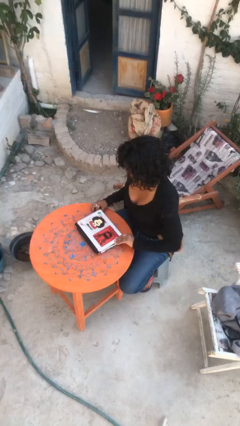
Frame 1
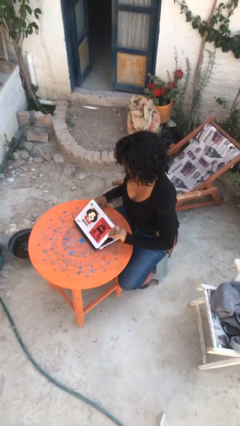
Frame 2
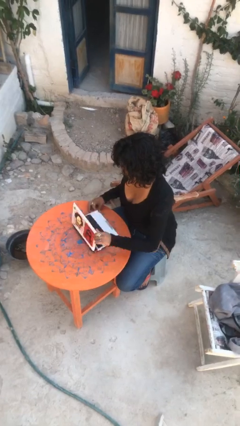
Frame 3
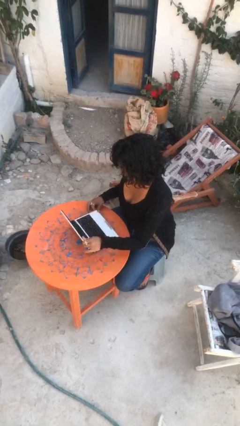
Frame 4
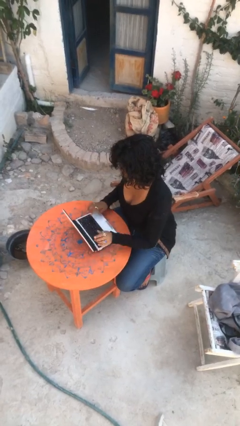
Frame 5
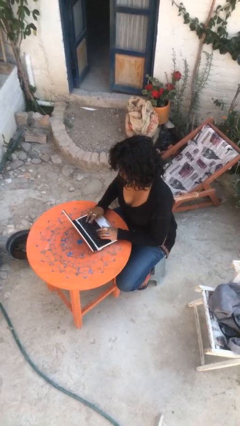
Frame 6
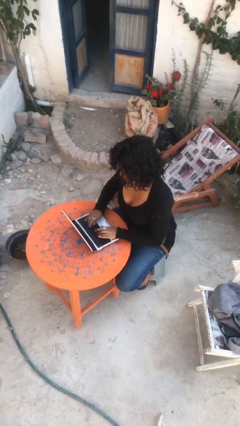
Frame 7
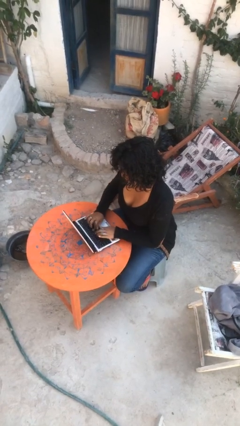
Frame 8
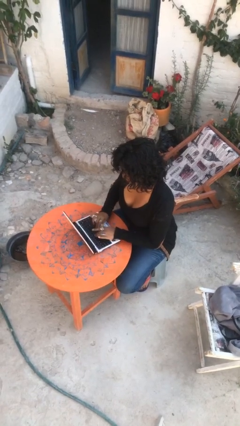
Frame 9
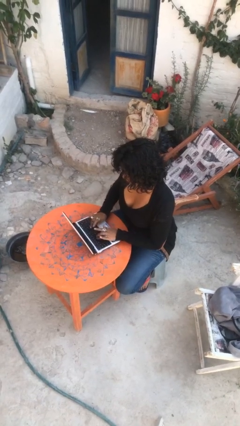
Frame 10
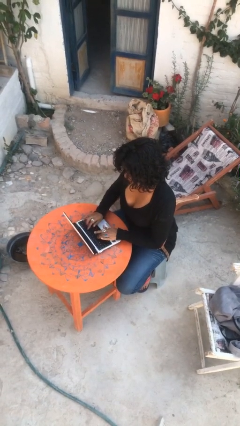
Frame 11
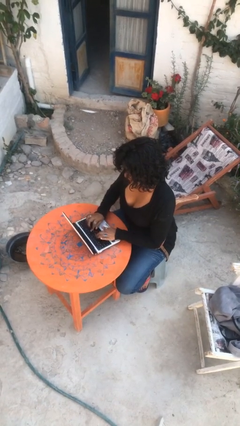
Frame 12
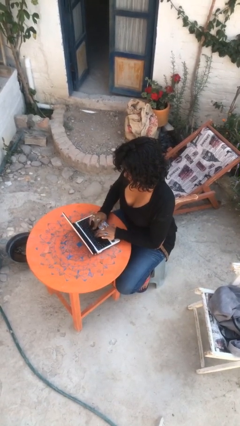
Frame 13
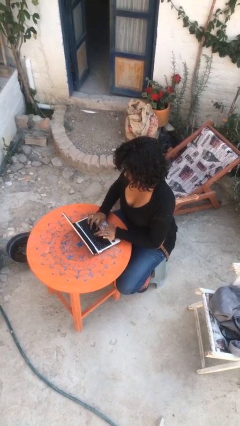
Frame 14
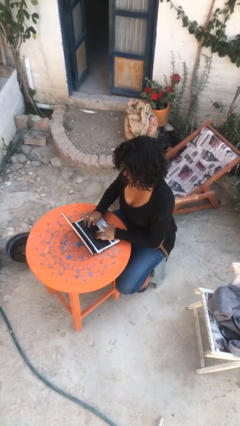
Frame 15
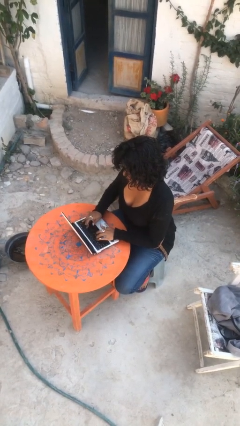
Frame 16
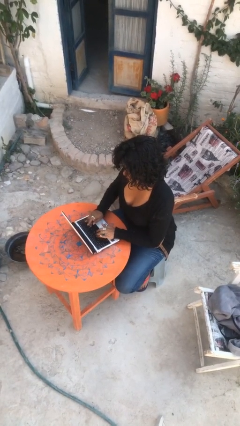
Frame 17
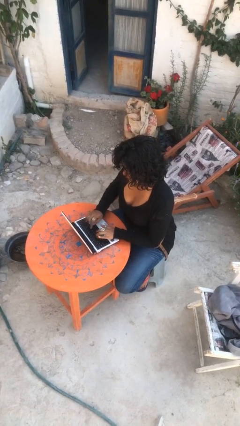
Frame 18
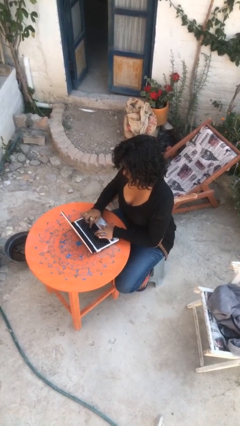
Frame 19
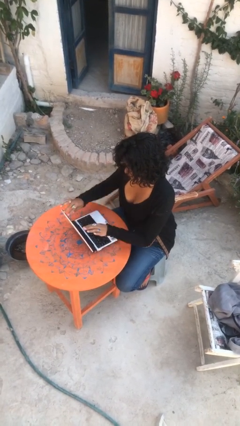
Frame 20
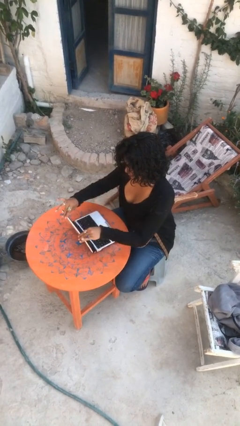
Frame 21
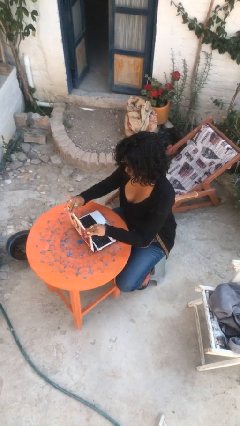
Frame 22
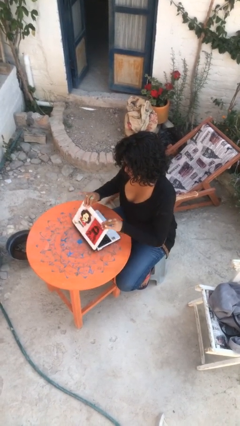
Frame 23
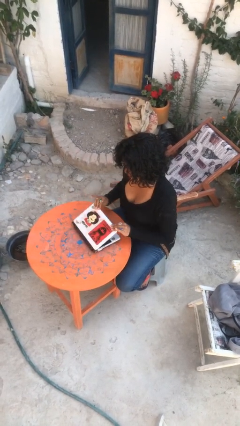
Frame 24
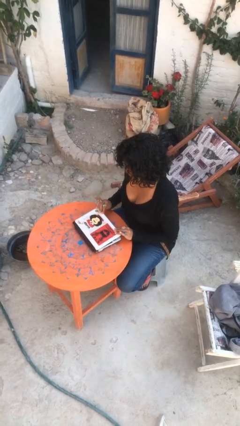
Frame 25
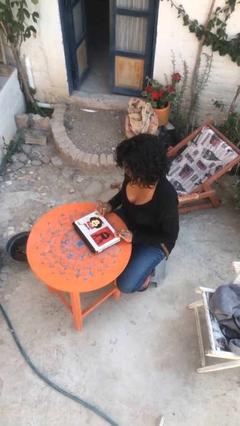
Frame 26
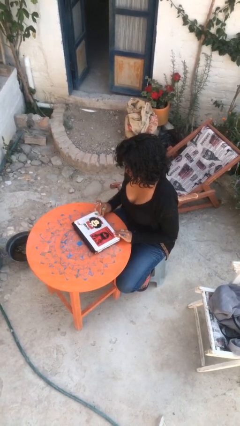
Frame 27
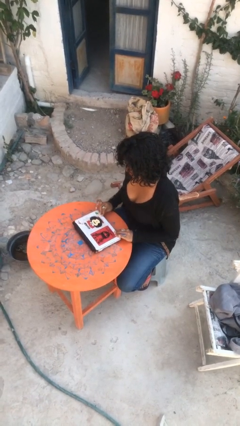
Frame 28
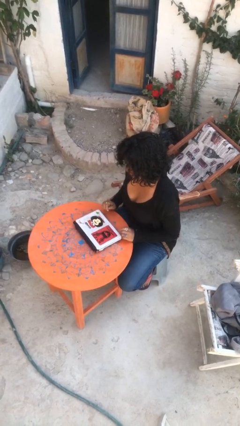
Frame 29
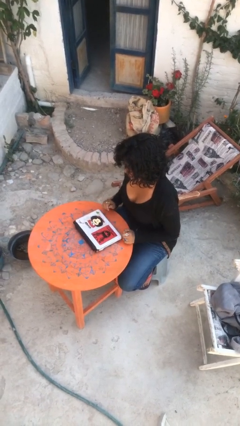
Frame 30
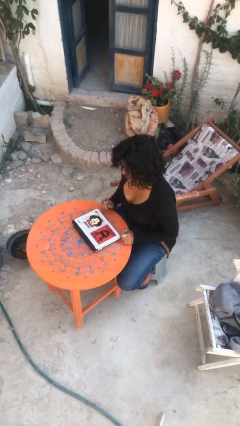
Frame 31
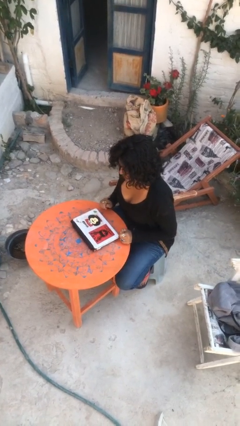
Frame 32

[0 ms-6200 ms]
person interacts with laptop

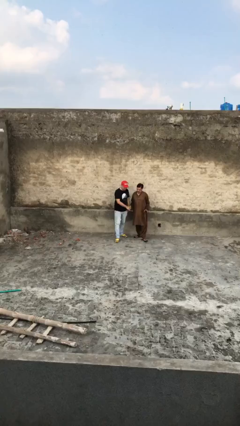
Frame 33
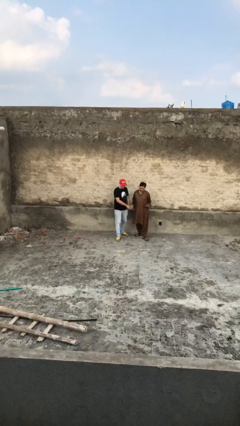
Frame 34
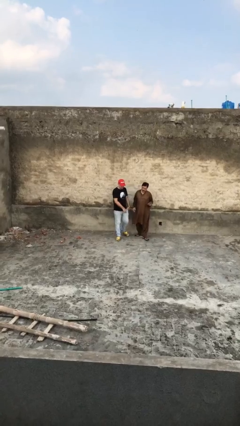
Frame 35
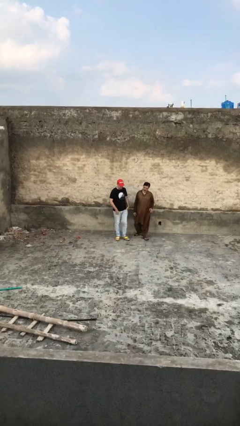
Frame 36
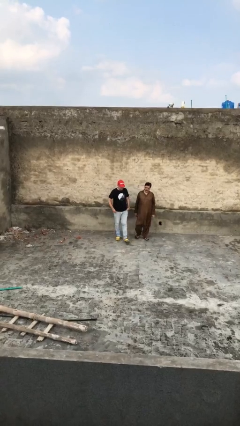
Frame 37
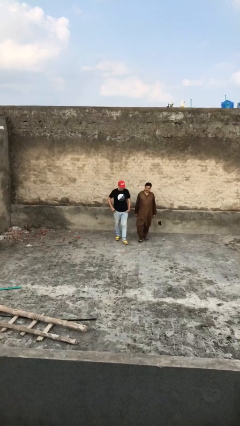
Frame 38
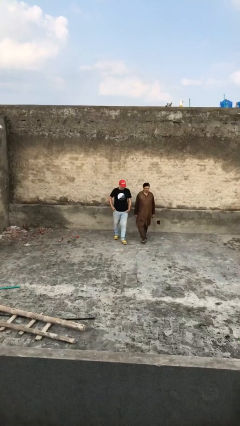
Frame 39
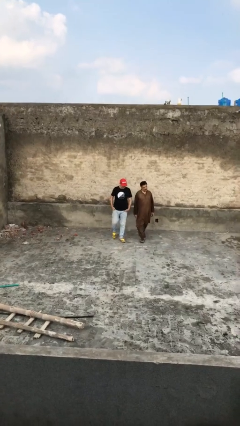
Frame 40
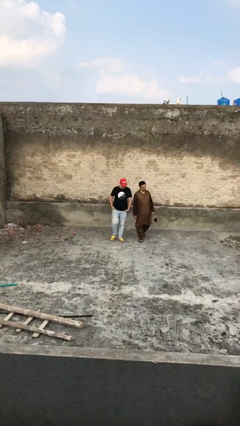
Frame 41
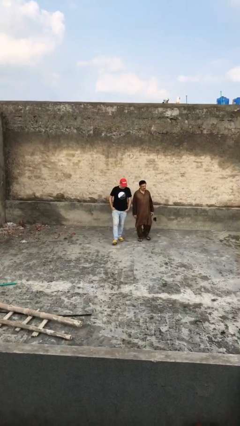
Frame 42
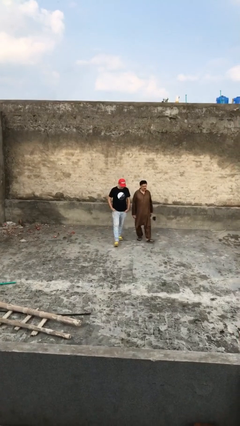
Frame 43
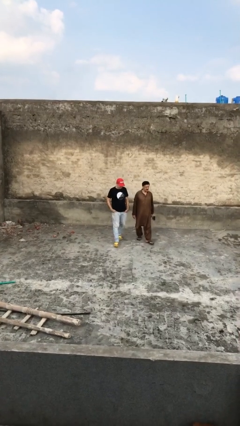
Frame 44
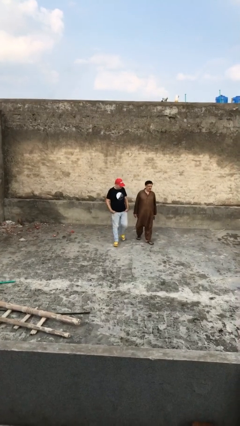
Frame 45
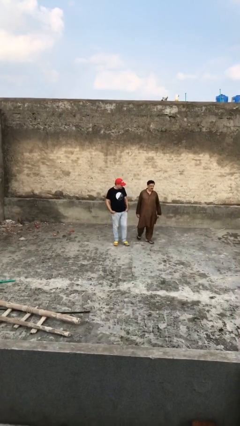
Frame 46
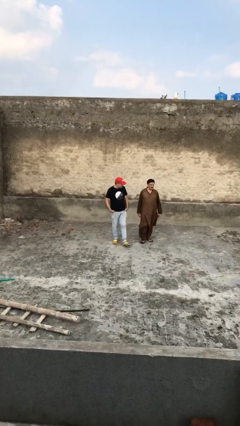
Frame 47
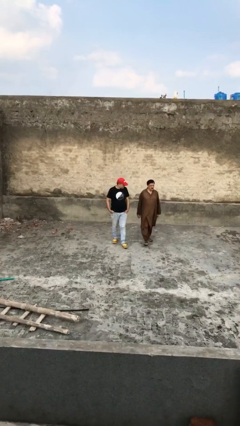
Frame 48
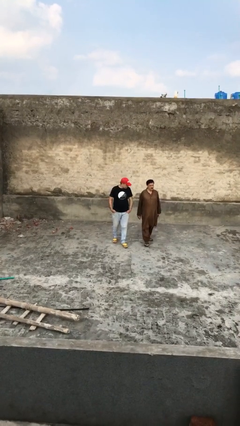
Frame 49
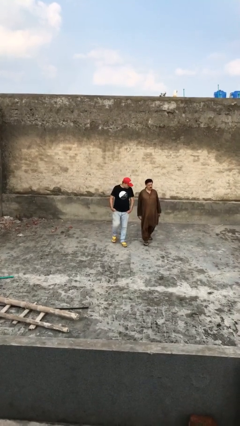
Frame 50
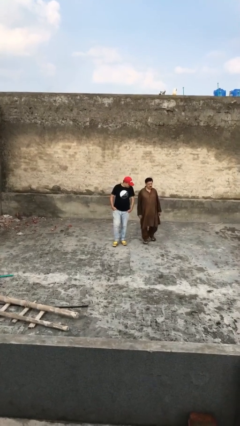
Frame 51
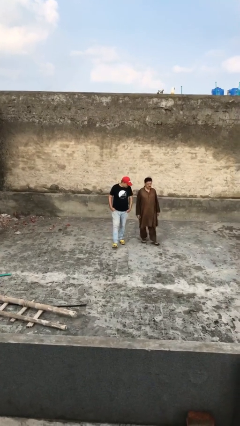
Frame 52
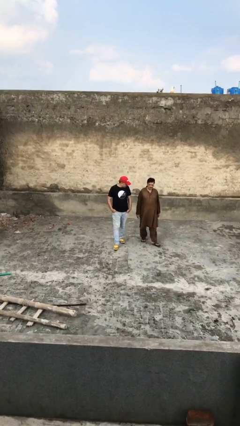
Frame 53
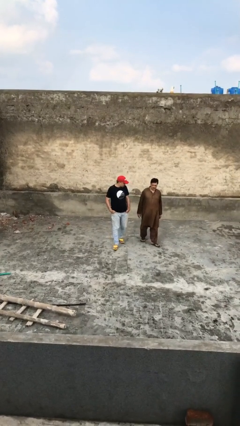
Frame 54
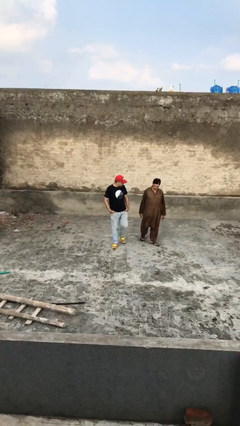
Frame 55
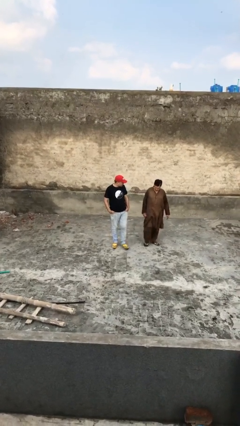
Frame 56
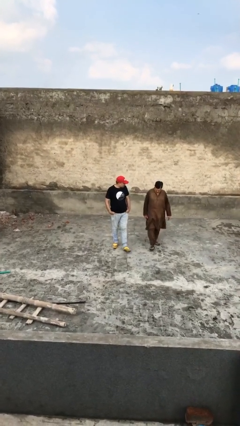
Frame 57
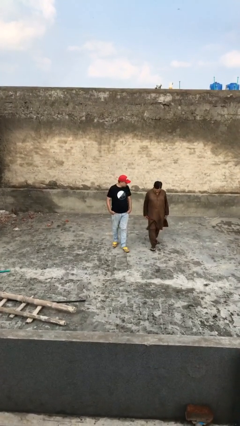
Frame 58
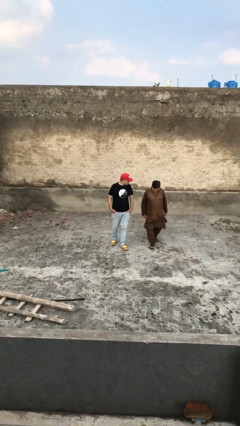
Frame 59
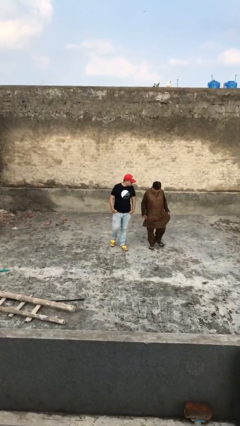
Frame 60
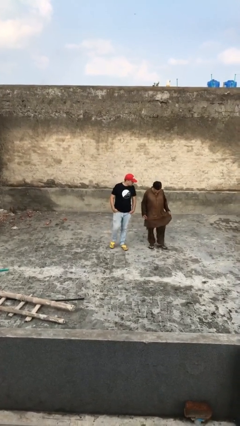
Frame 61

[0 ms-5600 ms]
person talks to person

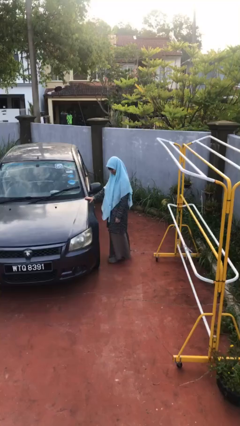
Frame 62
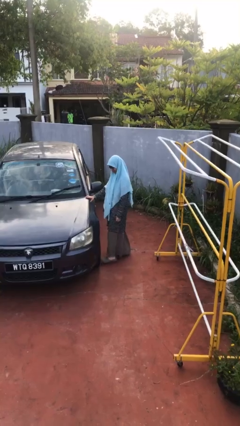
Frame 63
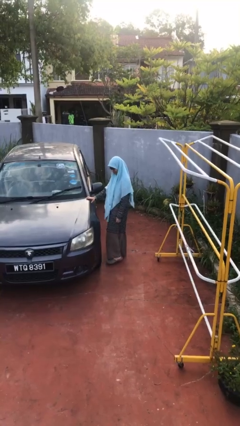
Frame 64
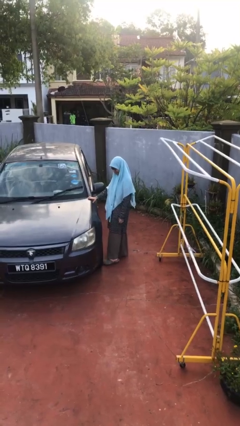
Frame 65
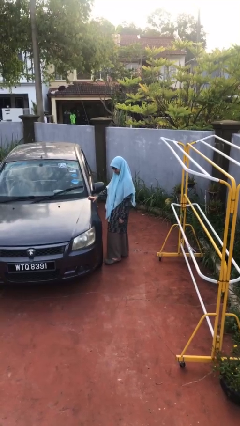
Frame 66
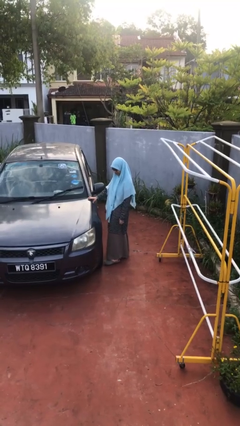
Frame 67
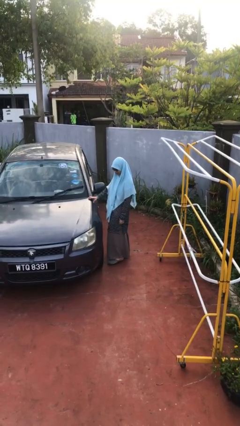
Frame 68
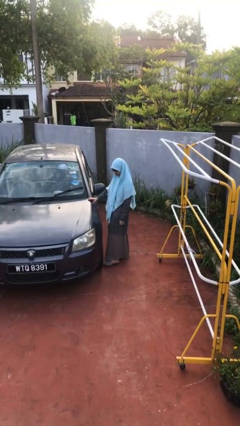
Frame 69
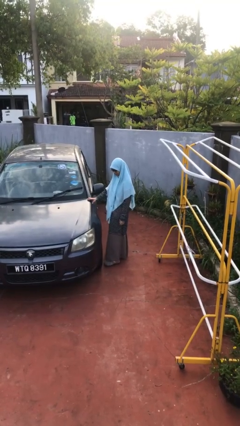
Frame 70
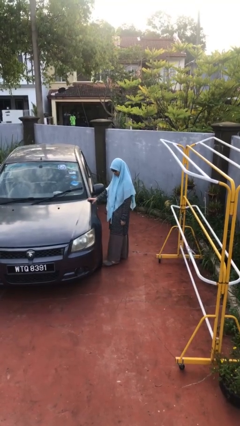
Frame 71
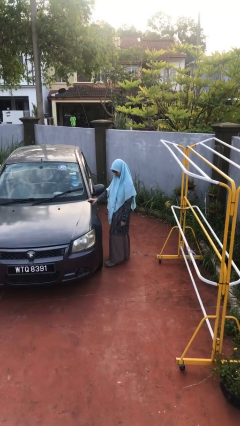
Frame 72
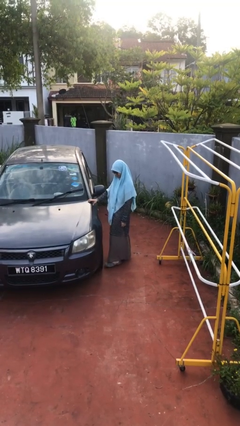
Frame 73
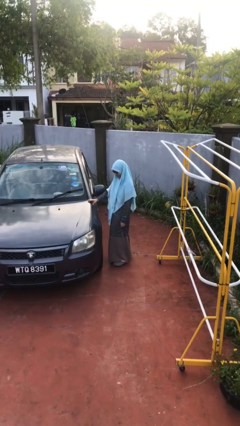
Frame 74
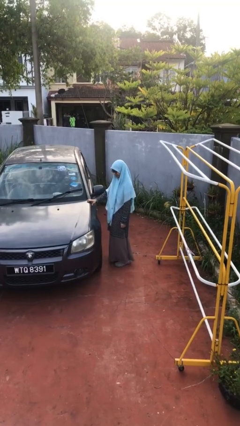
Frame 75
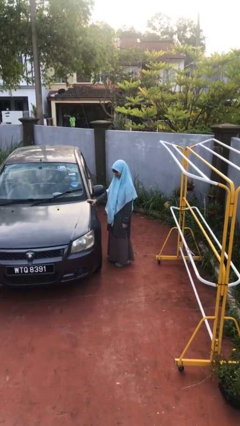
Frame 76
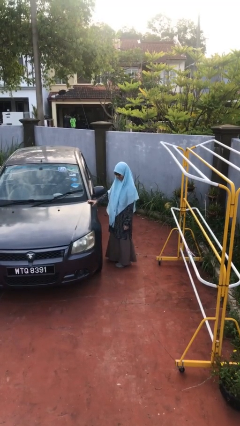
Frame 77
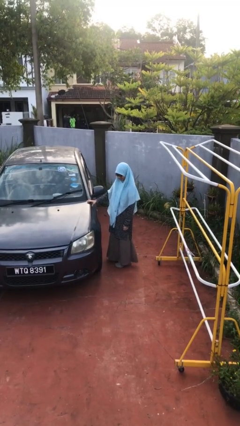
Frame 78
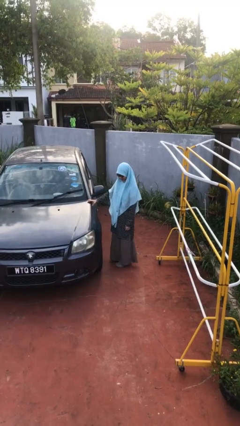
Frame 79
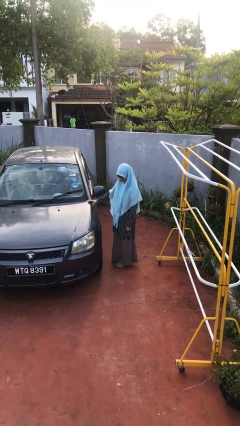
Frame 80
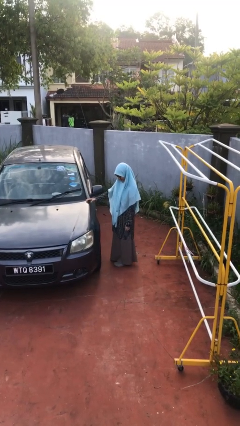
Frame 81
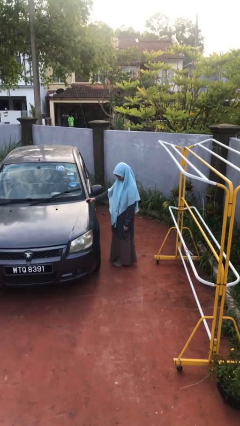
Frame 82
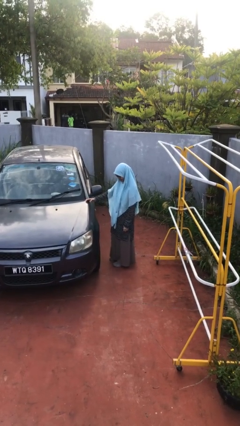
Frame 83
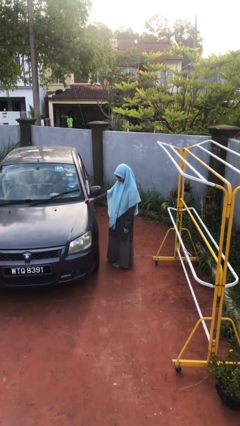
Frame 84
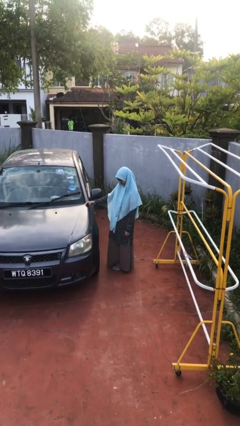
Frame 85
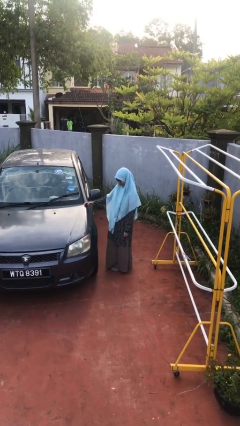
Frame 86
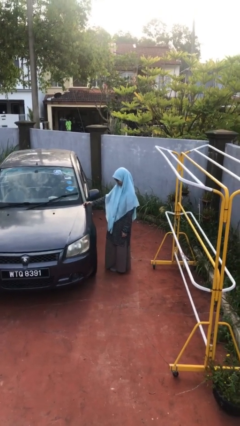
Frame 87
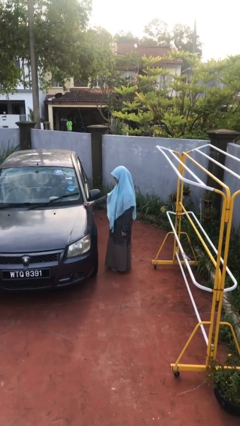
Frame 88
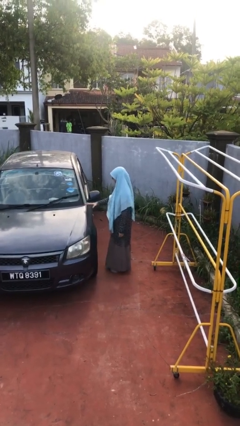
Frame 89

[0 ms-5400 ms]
person kicks car tires

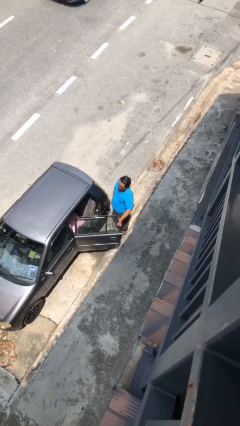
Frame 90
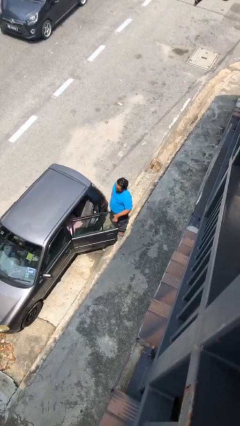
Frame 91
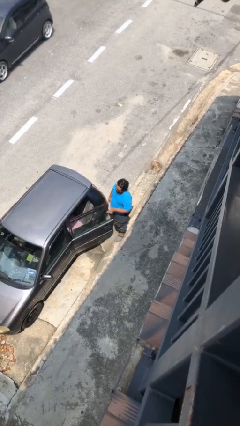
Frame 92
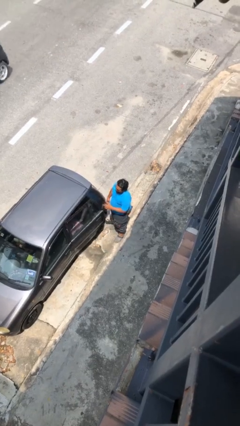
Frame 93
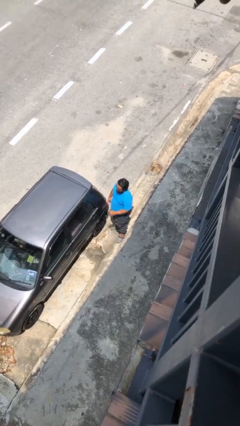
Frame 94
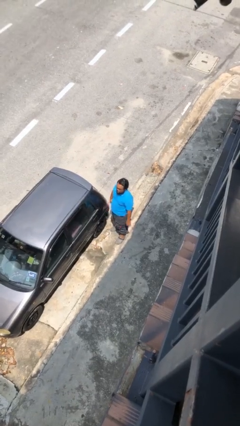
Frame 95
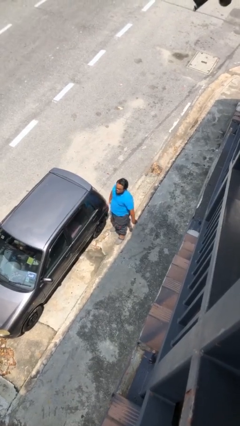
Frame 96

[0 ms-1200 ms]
person closes car door
